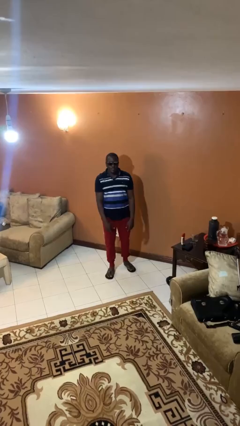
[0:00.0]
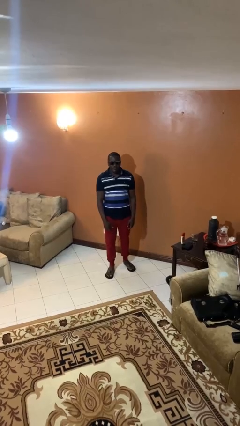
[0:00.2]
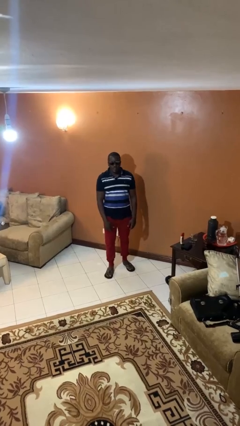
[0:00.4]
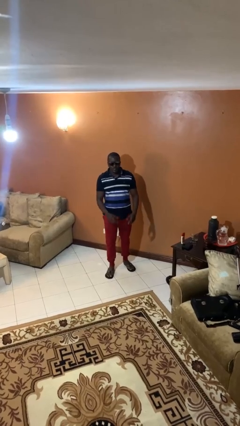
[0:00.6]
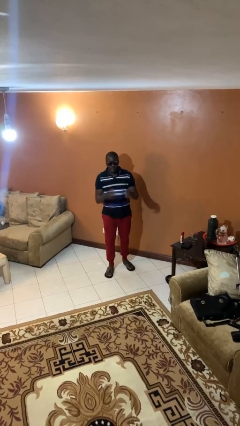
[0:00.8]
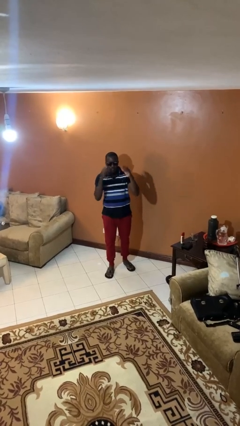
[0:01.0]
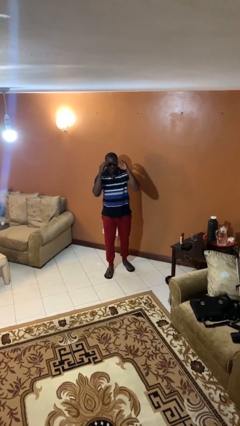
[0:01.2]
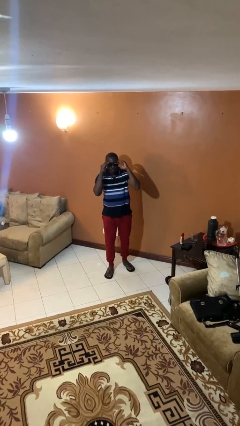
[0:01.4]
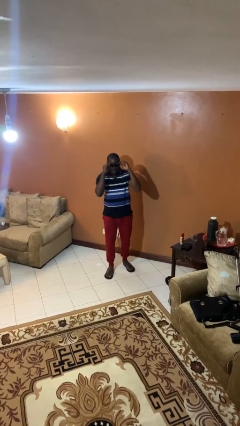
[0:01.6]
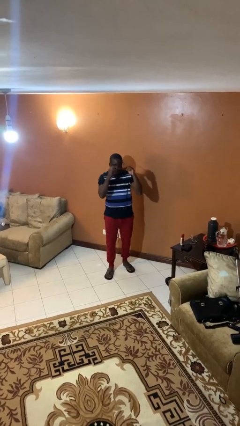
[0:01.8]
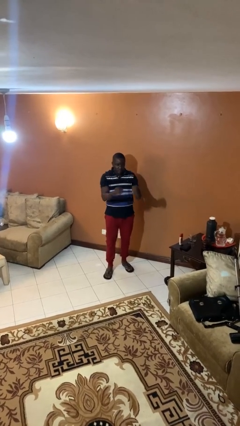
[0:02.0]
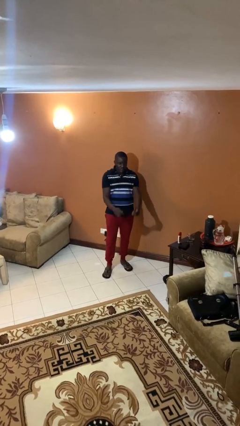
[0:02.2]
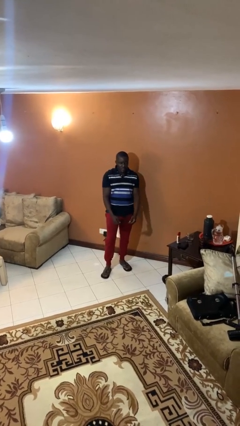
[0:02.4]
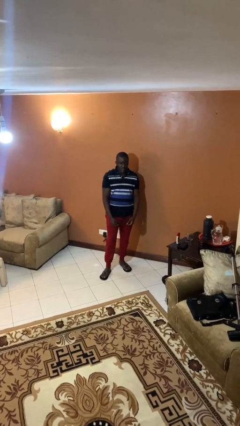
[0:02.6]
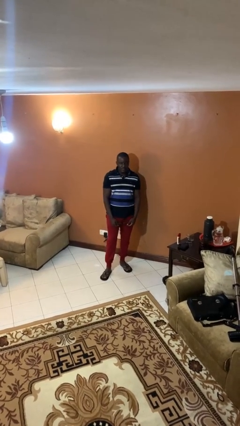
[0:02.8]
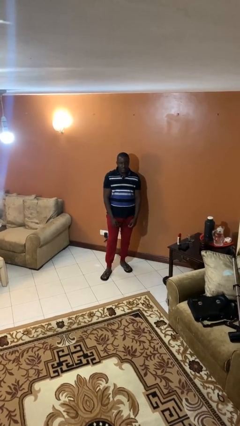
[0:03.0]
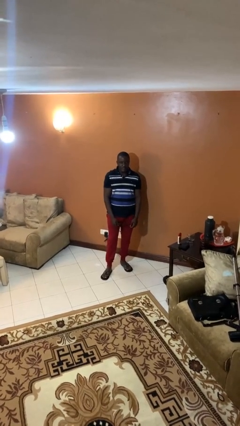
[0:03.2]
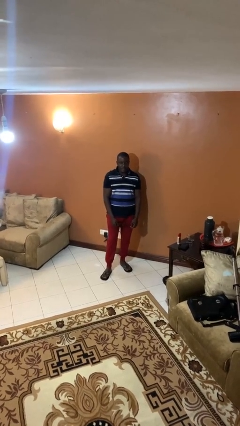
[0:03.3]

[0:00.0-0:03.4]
person takes off sunglasses

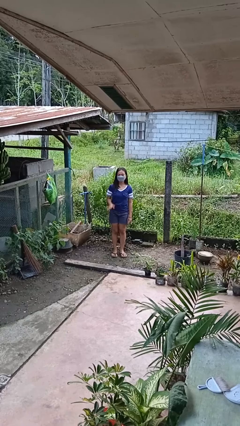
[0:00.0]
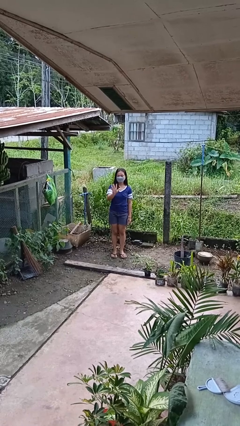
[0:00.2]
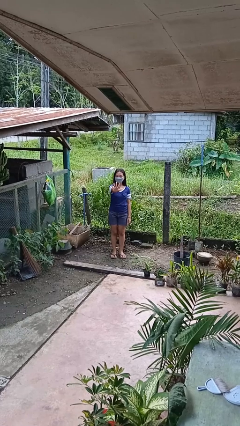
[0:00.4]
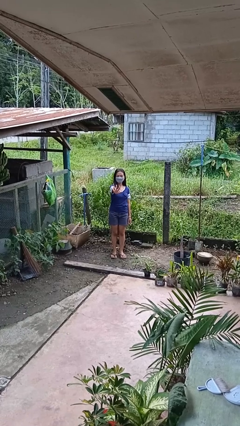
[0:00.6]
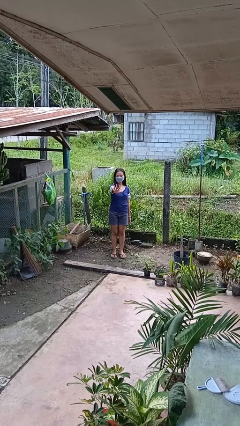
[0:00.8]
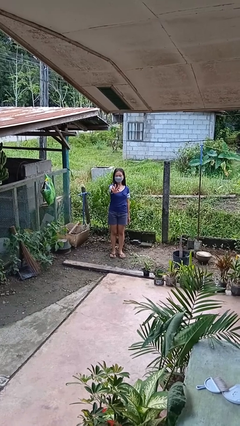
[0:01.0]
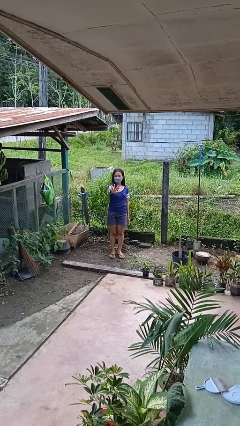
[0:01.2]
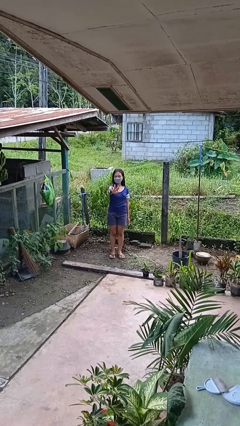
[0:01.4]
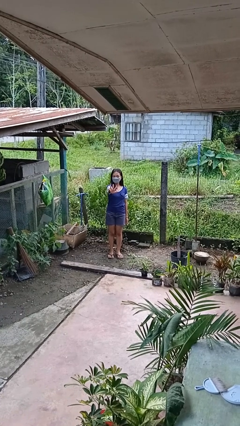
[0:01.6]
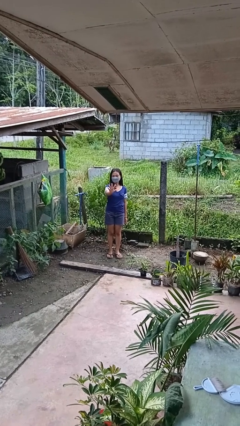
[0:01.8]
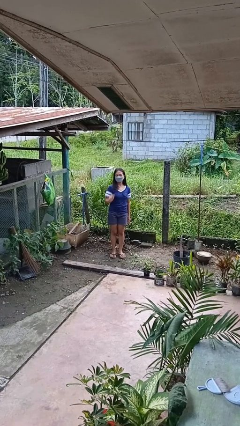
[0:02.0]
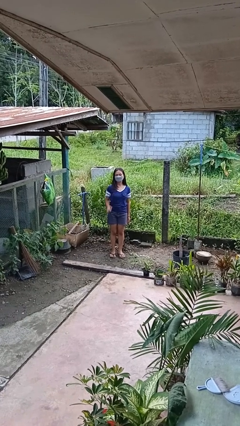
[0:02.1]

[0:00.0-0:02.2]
person gestures number five

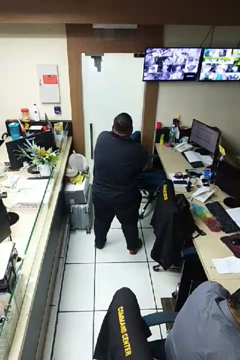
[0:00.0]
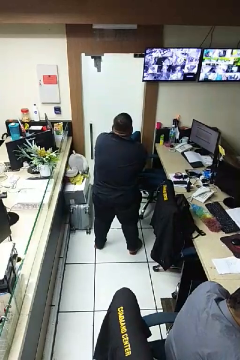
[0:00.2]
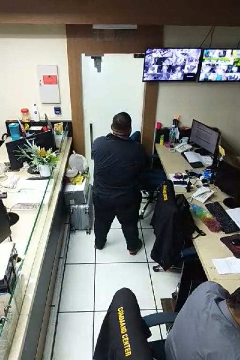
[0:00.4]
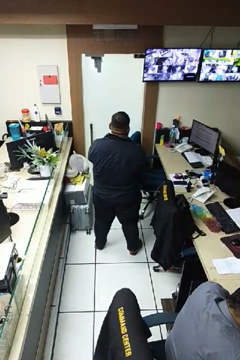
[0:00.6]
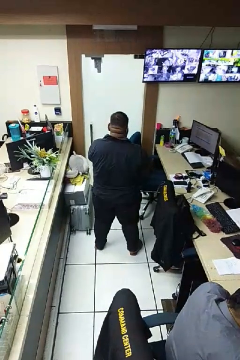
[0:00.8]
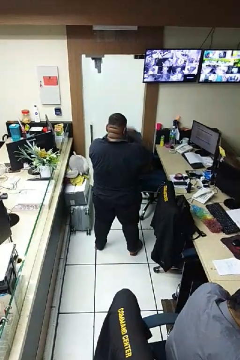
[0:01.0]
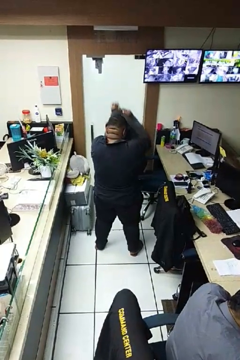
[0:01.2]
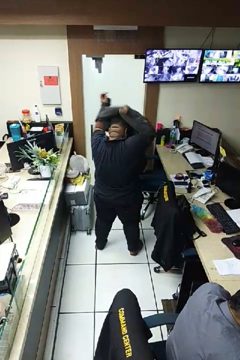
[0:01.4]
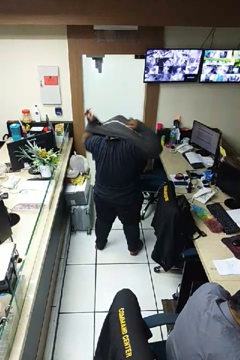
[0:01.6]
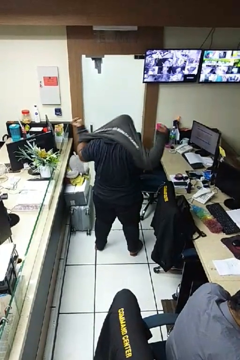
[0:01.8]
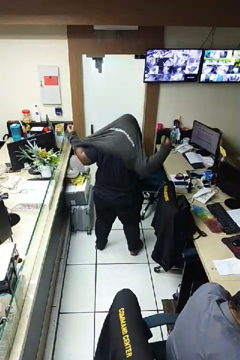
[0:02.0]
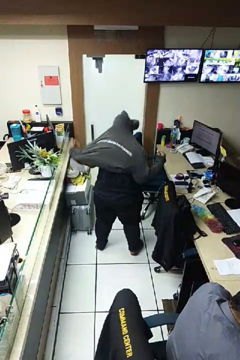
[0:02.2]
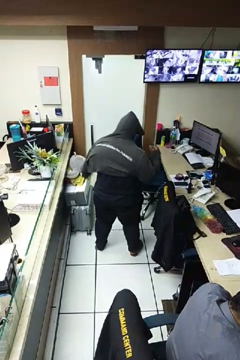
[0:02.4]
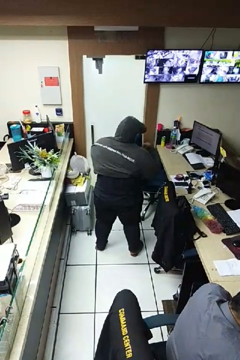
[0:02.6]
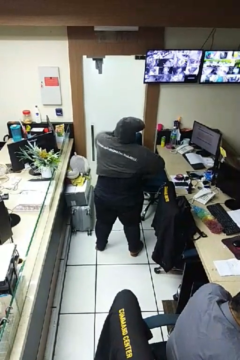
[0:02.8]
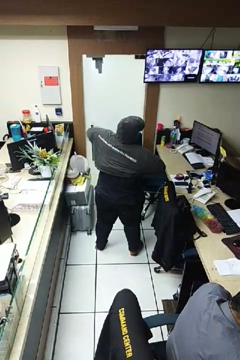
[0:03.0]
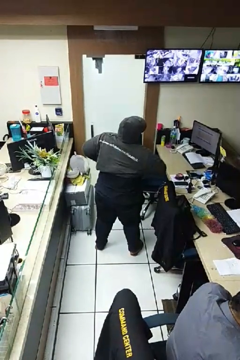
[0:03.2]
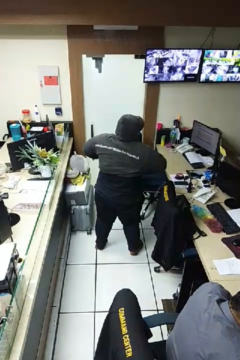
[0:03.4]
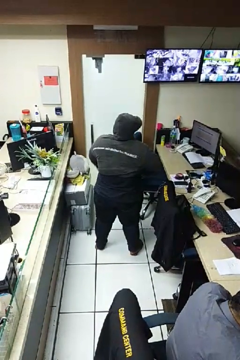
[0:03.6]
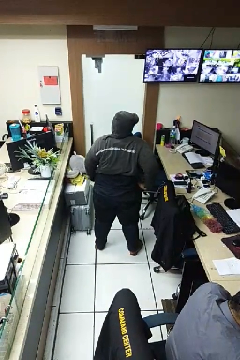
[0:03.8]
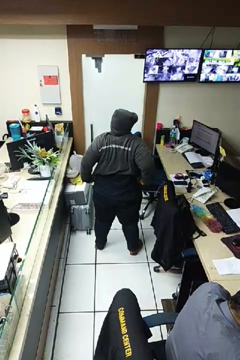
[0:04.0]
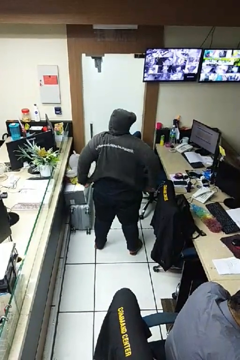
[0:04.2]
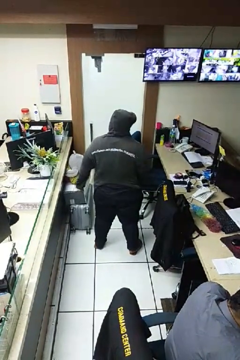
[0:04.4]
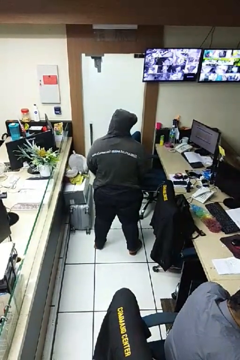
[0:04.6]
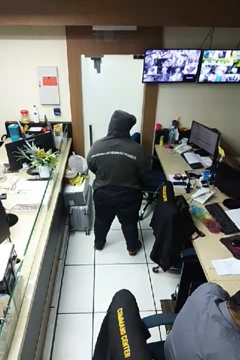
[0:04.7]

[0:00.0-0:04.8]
person puts on hoodie

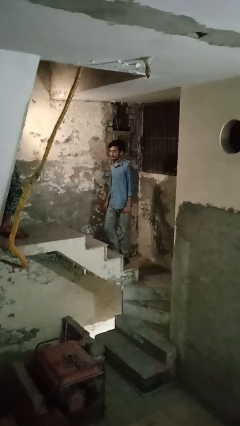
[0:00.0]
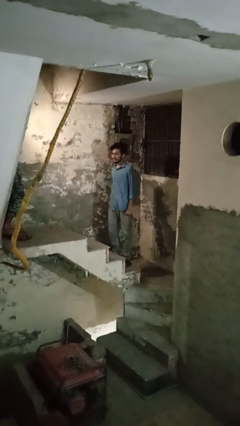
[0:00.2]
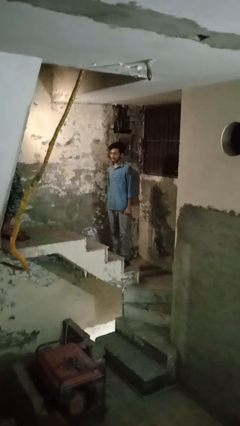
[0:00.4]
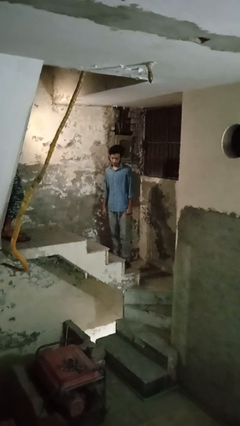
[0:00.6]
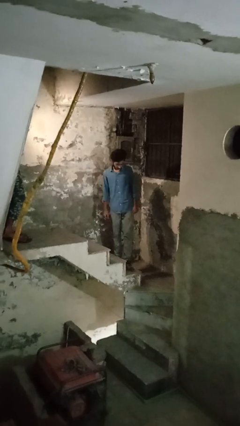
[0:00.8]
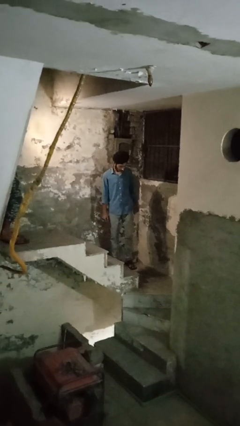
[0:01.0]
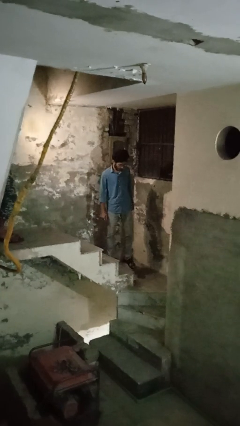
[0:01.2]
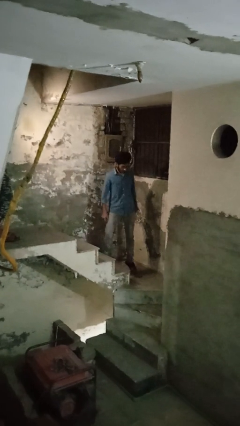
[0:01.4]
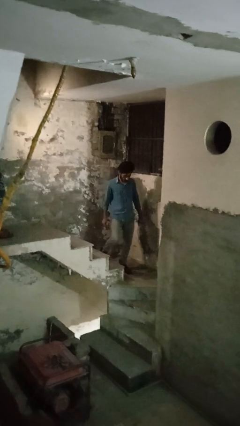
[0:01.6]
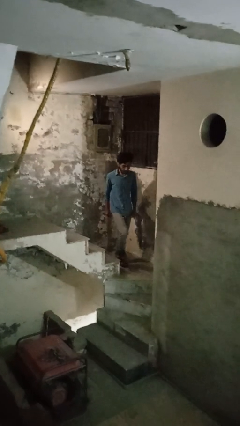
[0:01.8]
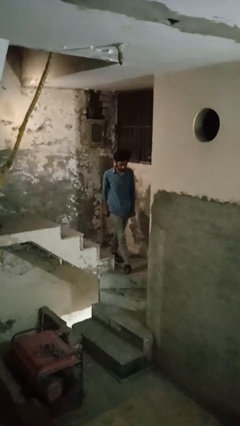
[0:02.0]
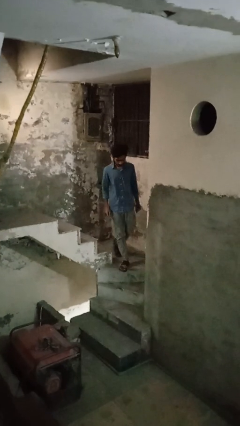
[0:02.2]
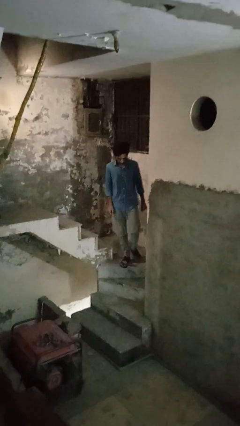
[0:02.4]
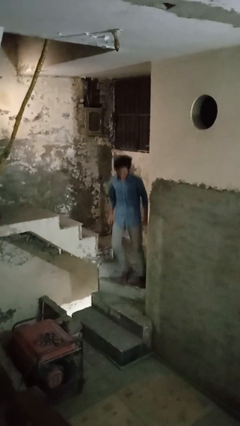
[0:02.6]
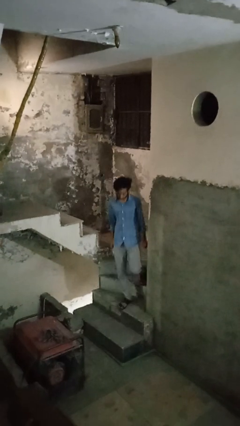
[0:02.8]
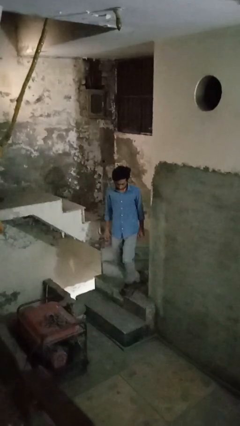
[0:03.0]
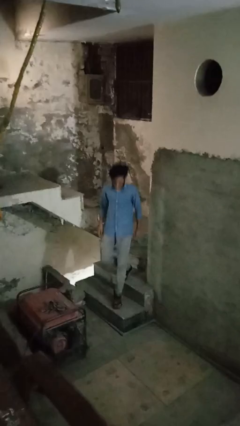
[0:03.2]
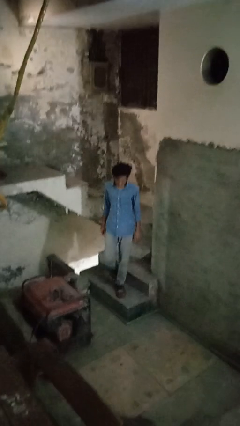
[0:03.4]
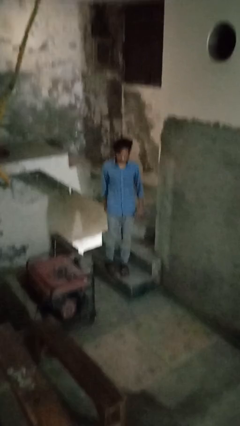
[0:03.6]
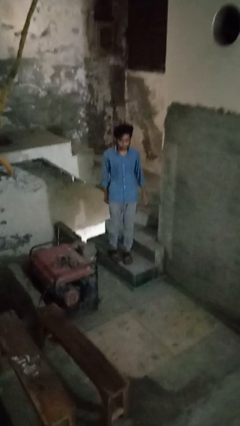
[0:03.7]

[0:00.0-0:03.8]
person climbs down stairs

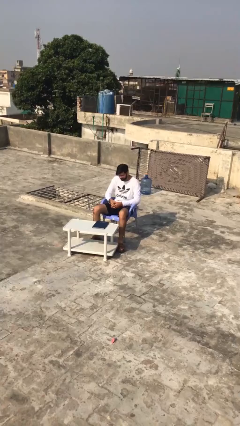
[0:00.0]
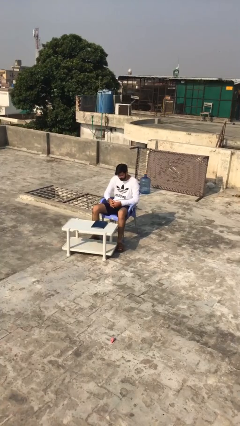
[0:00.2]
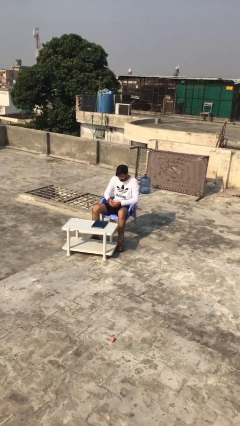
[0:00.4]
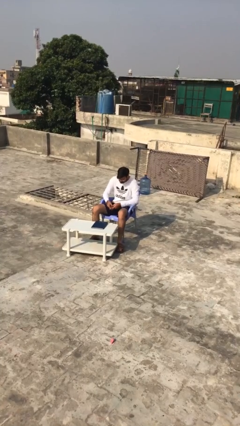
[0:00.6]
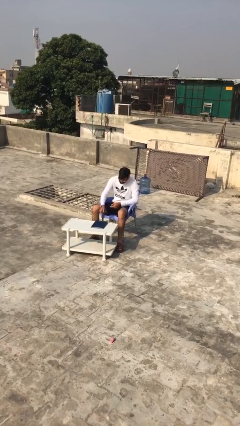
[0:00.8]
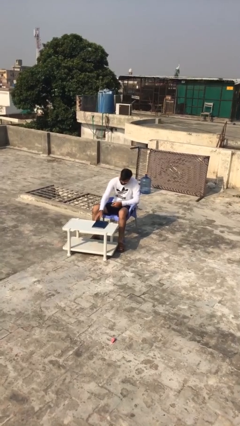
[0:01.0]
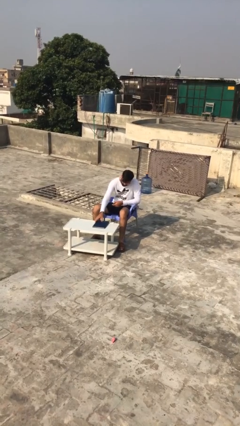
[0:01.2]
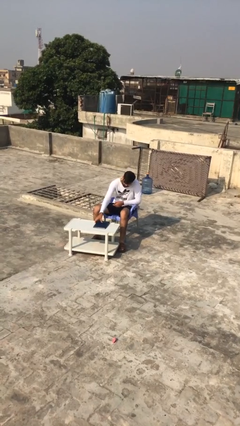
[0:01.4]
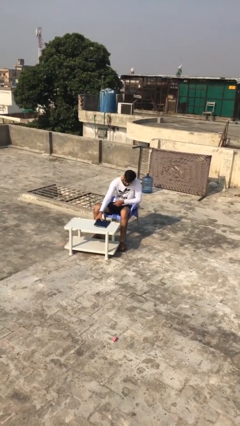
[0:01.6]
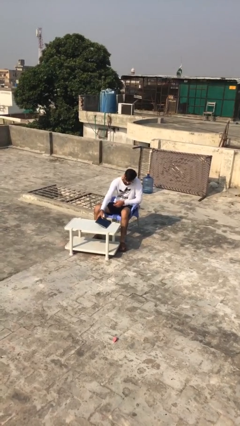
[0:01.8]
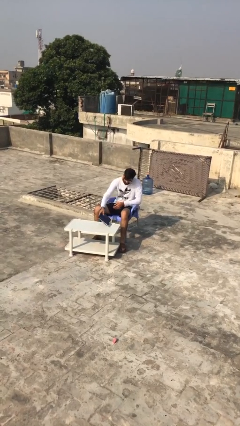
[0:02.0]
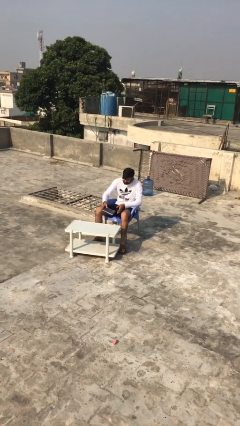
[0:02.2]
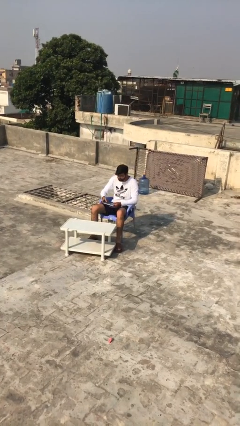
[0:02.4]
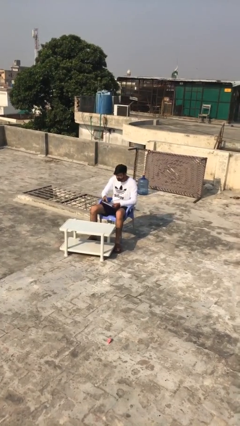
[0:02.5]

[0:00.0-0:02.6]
person picks up object from table

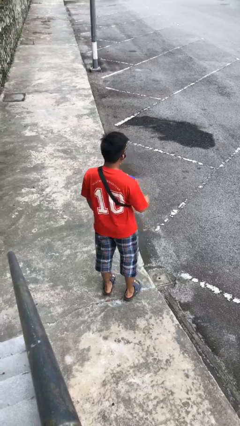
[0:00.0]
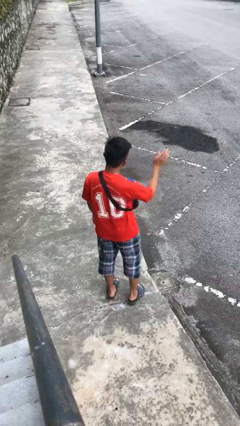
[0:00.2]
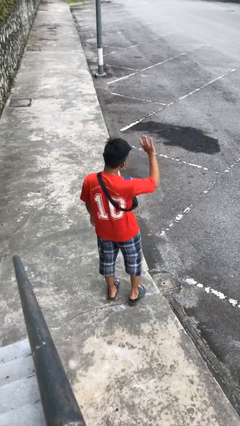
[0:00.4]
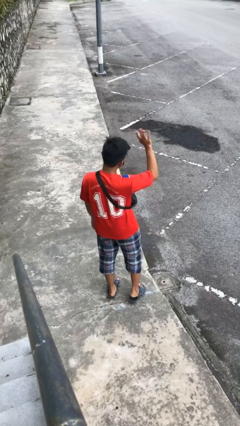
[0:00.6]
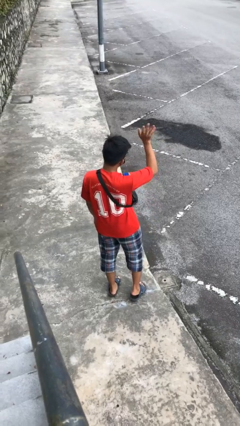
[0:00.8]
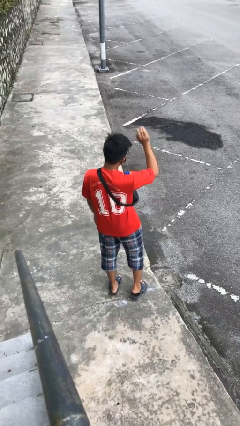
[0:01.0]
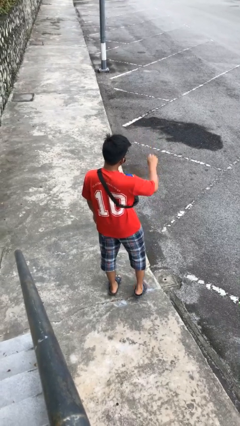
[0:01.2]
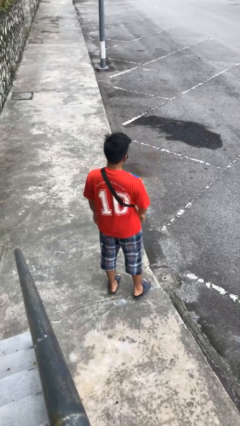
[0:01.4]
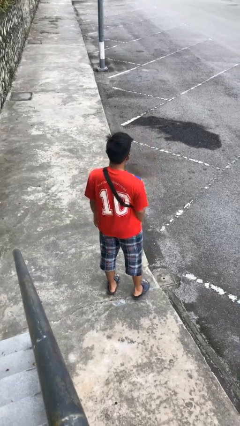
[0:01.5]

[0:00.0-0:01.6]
person waves at person
